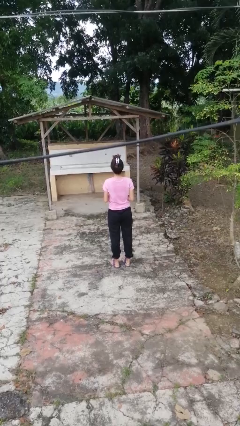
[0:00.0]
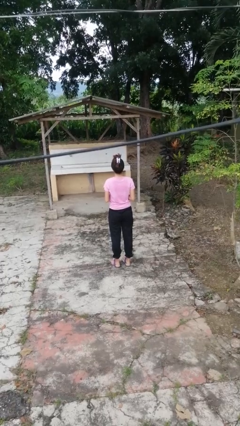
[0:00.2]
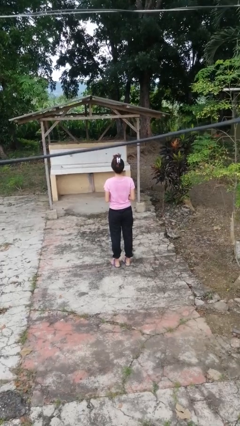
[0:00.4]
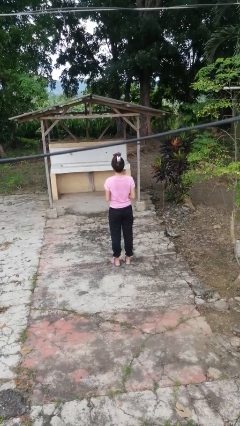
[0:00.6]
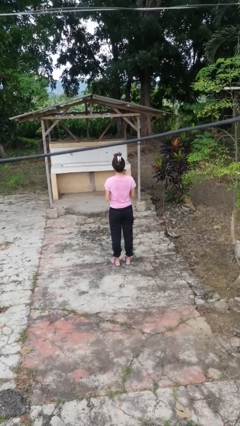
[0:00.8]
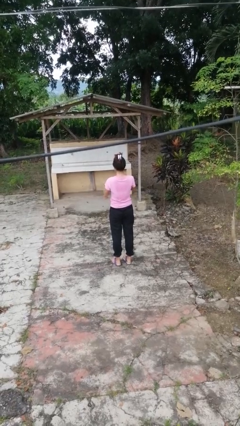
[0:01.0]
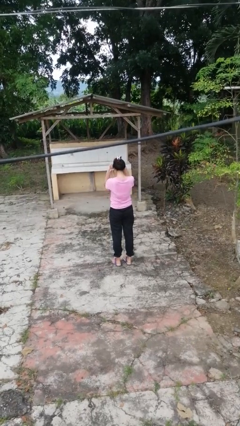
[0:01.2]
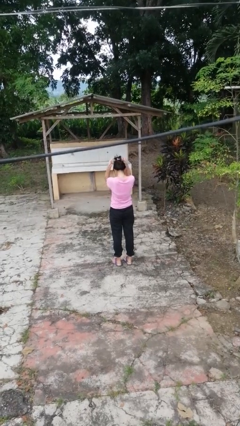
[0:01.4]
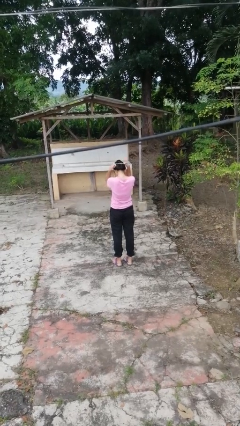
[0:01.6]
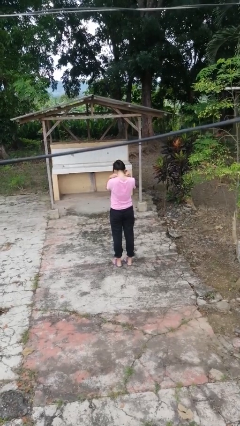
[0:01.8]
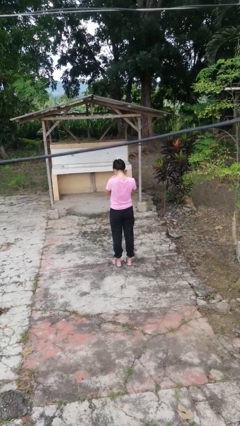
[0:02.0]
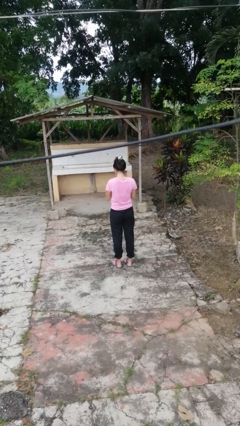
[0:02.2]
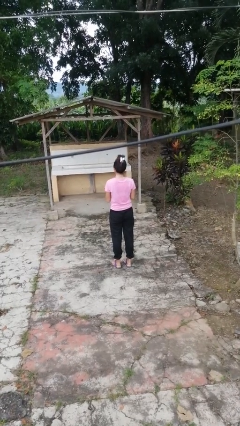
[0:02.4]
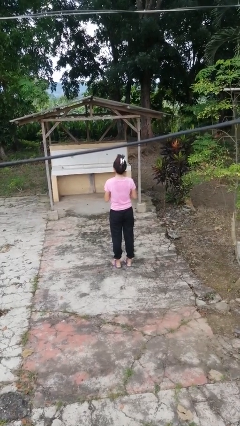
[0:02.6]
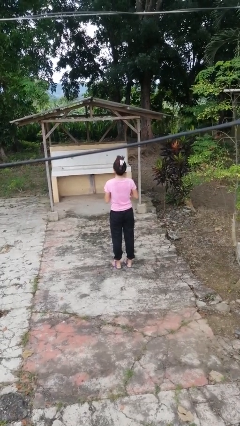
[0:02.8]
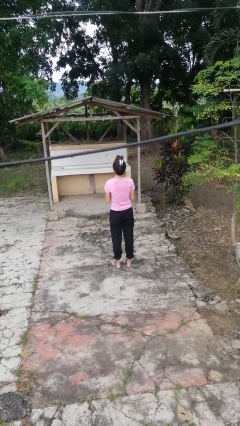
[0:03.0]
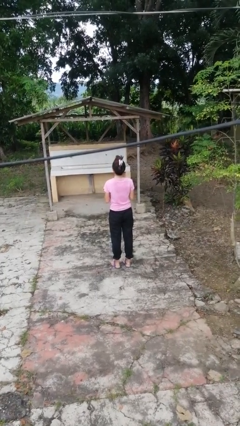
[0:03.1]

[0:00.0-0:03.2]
person puts on necklace

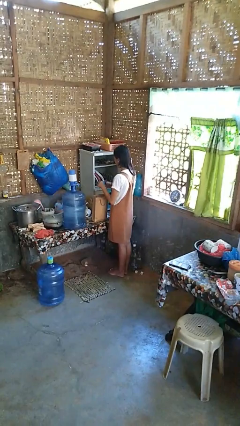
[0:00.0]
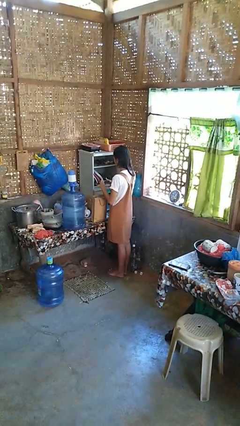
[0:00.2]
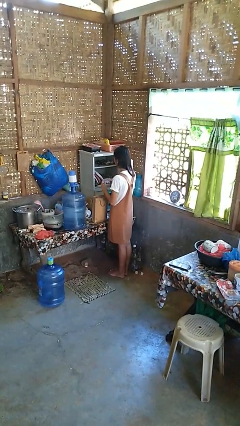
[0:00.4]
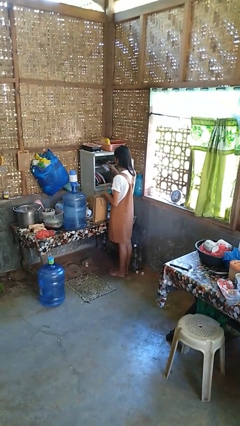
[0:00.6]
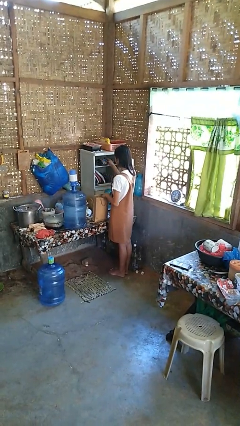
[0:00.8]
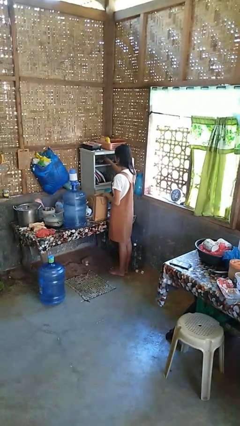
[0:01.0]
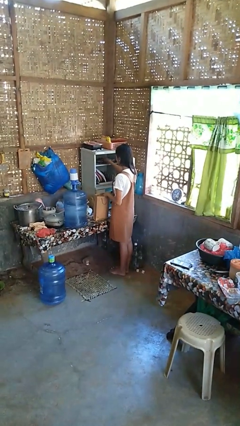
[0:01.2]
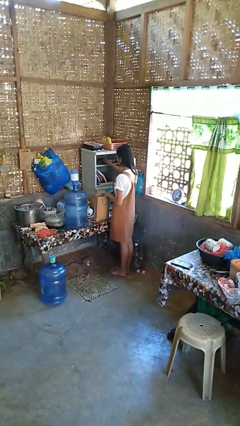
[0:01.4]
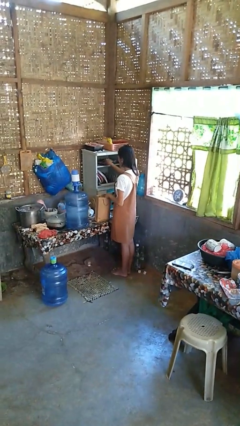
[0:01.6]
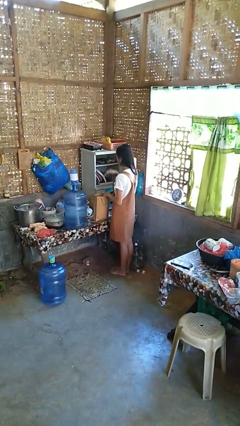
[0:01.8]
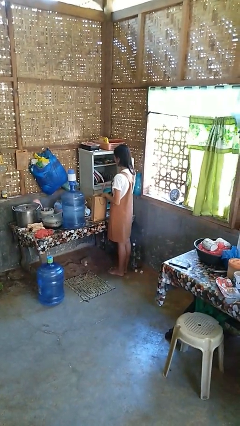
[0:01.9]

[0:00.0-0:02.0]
person loads groceries into cabinet

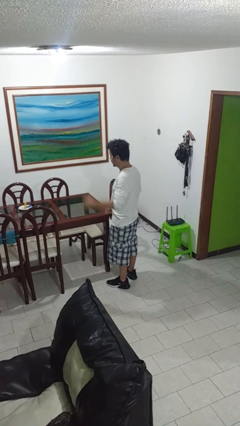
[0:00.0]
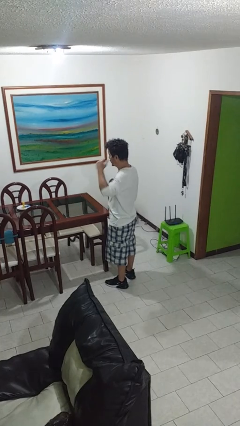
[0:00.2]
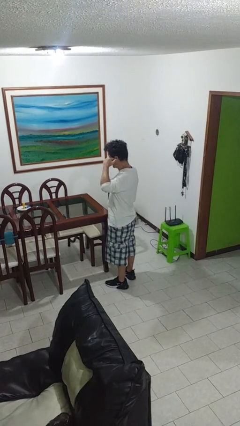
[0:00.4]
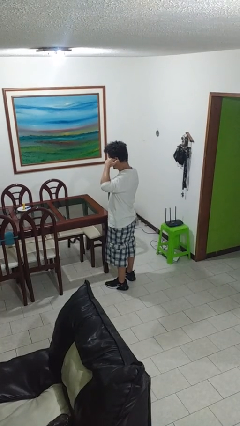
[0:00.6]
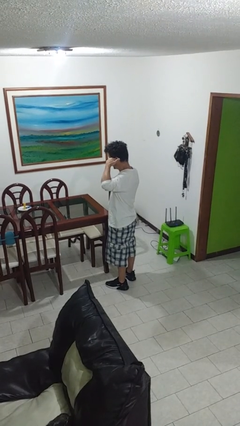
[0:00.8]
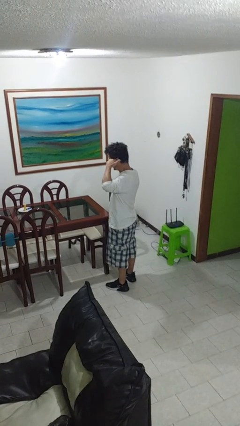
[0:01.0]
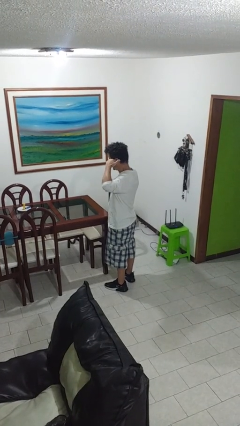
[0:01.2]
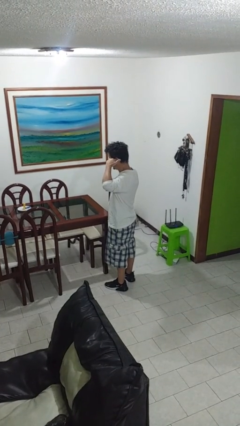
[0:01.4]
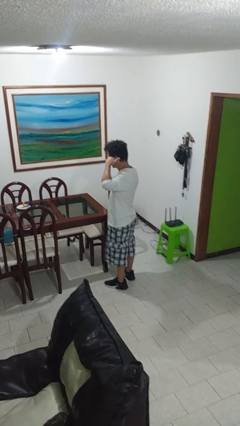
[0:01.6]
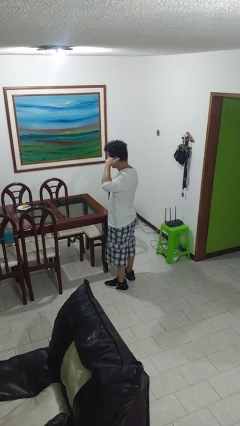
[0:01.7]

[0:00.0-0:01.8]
person puts fingers in ear

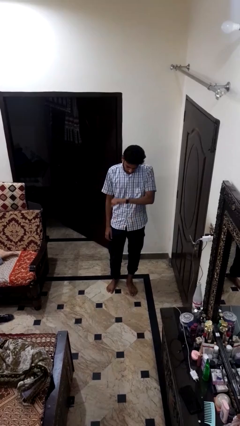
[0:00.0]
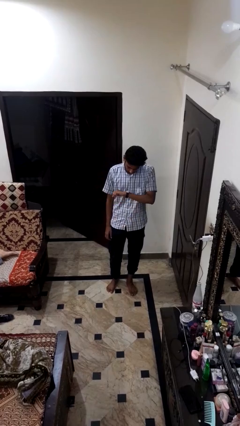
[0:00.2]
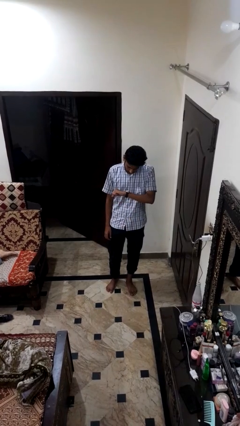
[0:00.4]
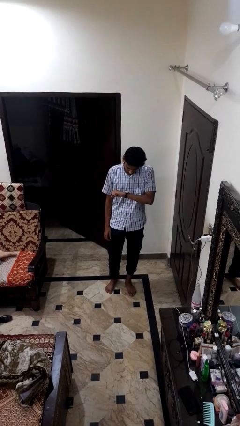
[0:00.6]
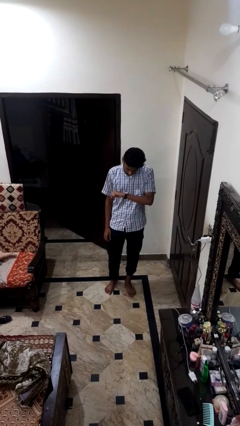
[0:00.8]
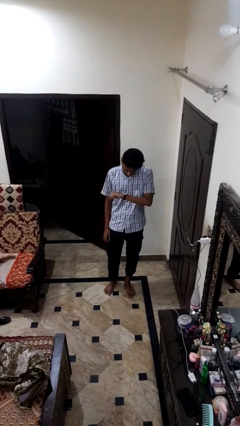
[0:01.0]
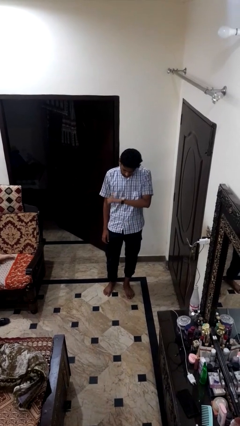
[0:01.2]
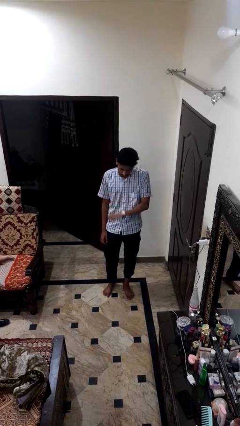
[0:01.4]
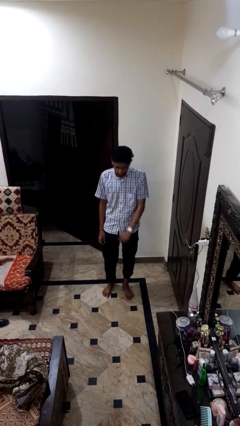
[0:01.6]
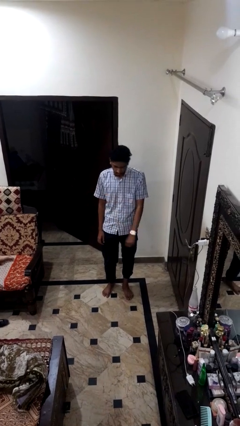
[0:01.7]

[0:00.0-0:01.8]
person looks at wristwatch

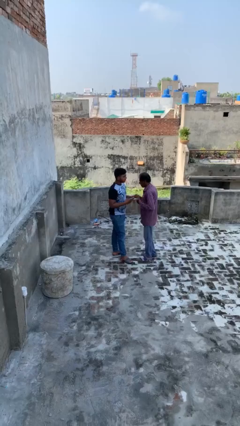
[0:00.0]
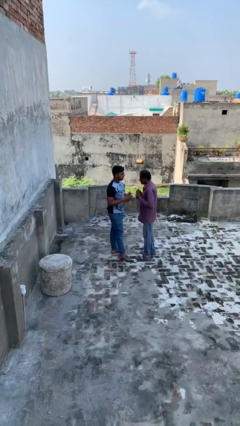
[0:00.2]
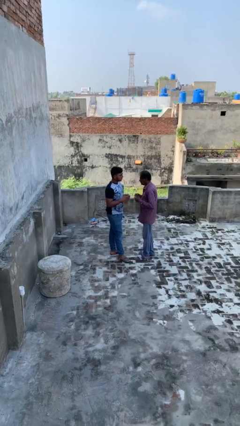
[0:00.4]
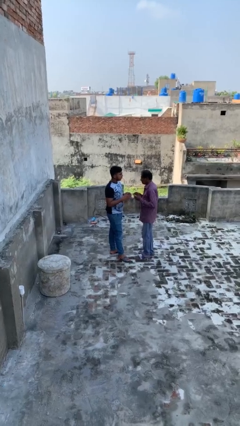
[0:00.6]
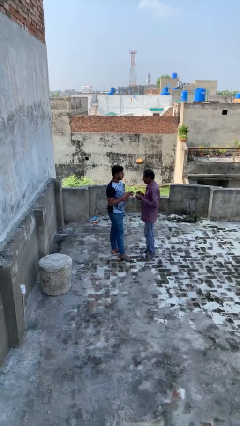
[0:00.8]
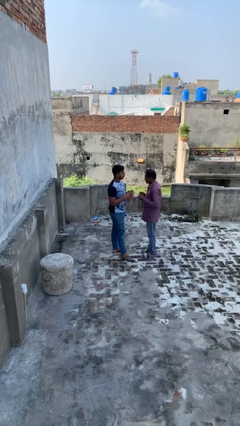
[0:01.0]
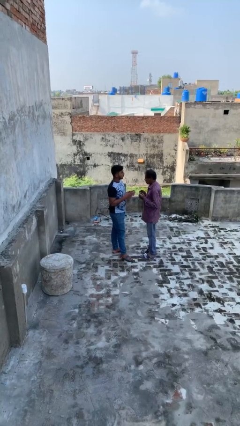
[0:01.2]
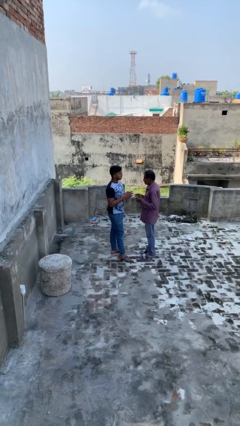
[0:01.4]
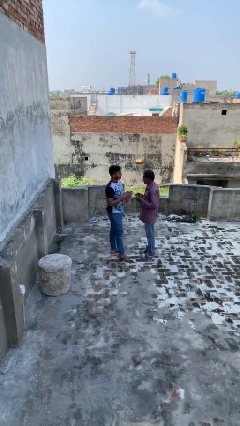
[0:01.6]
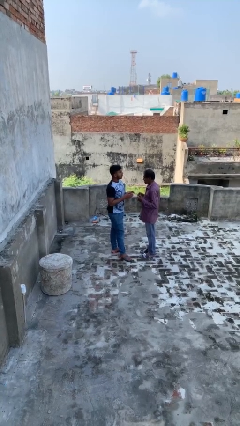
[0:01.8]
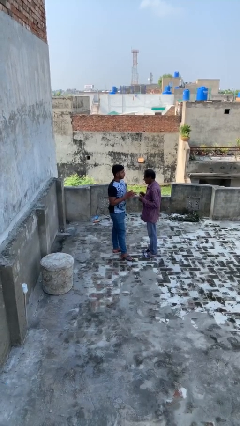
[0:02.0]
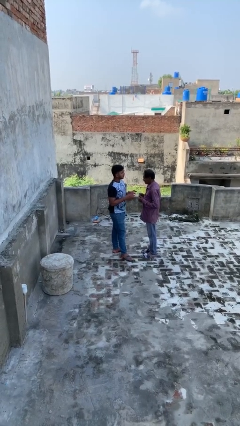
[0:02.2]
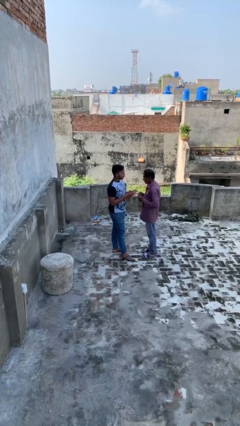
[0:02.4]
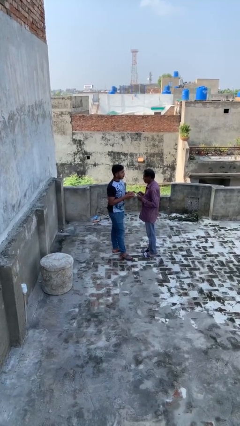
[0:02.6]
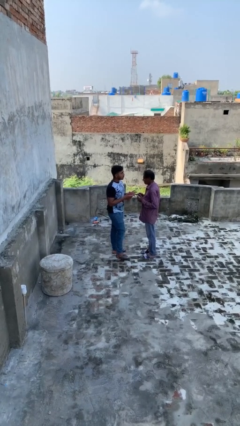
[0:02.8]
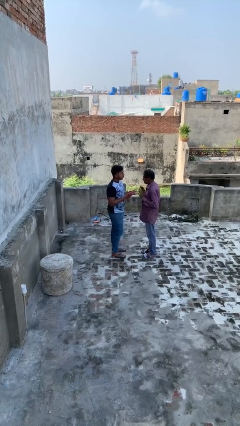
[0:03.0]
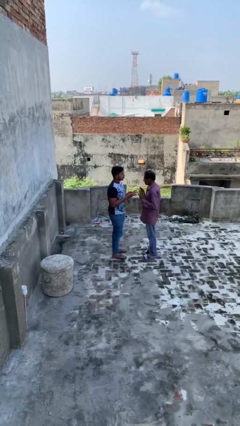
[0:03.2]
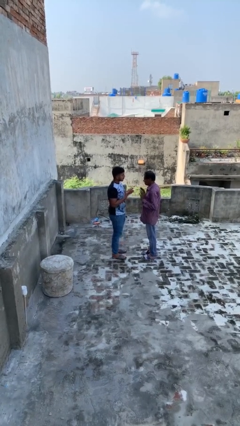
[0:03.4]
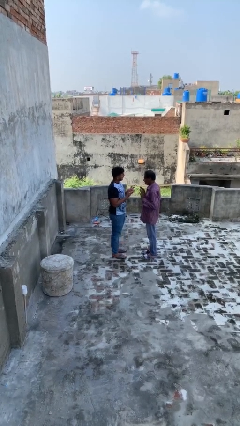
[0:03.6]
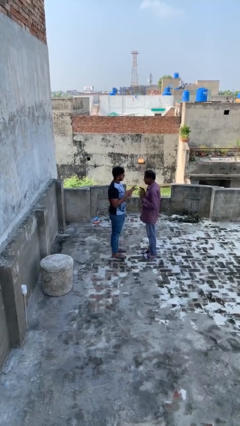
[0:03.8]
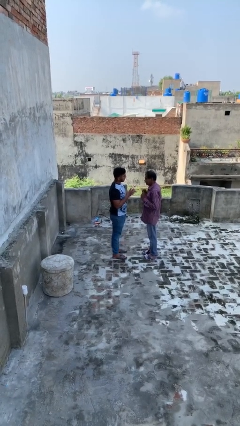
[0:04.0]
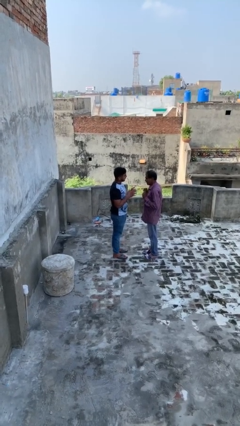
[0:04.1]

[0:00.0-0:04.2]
person talks to person

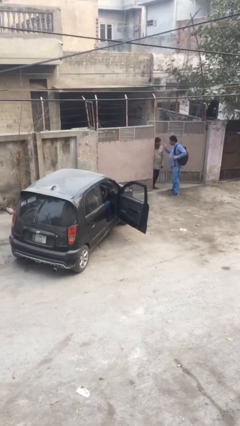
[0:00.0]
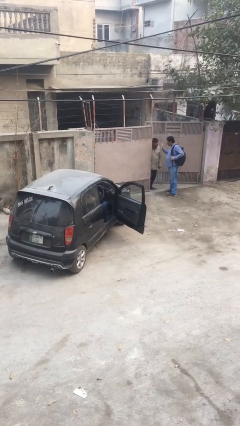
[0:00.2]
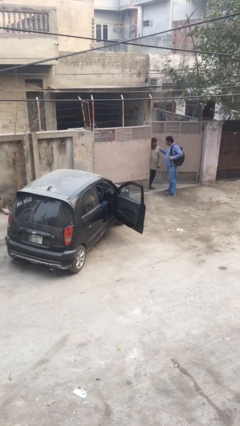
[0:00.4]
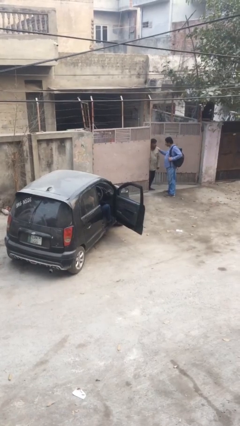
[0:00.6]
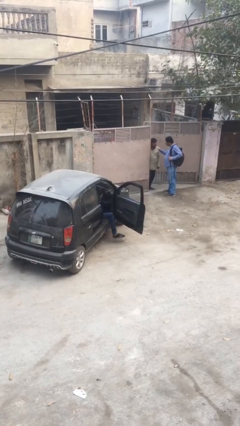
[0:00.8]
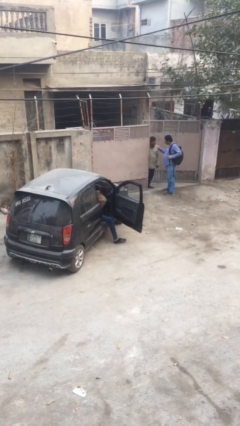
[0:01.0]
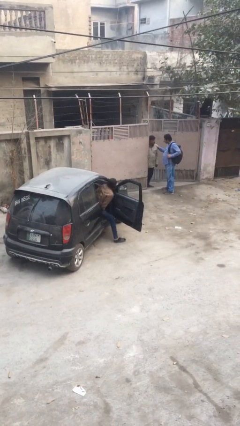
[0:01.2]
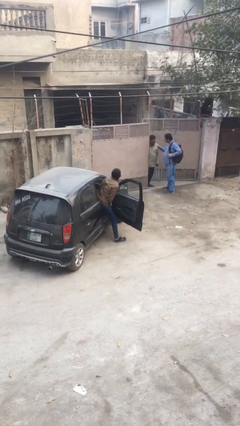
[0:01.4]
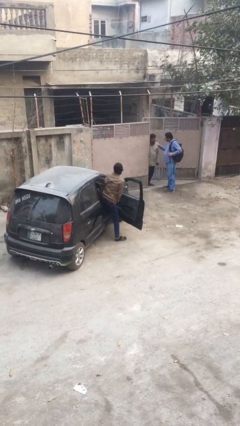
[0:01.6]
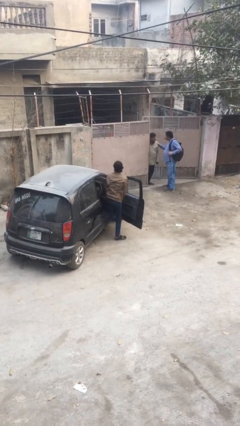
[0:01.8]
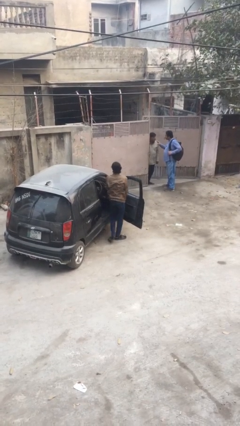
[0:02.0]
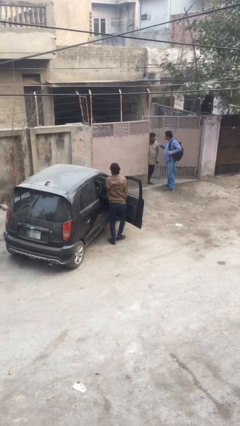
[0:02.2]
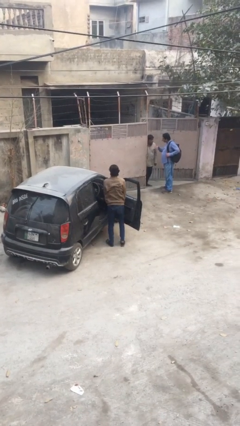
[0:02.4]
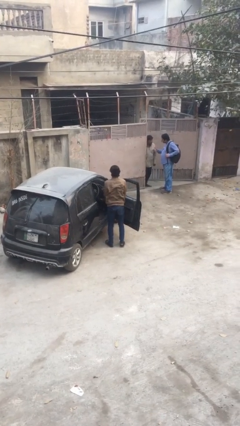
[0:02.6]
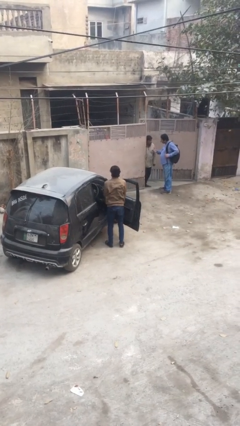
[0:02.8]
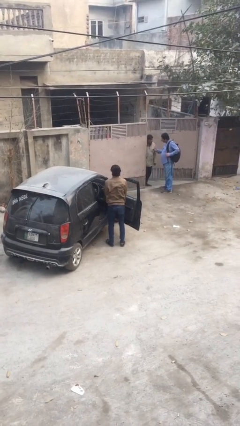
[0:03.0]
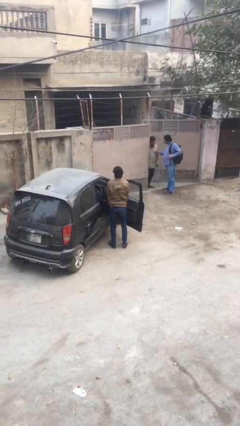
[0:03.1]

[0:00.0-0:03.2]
person exits car

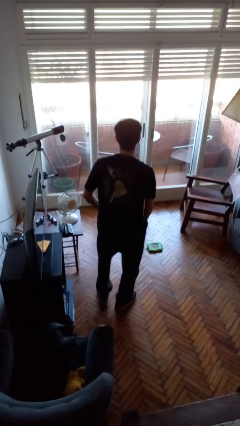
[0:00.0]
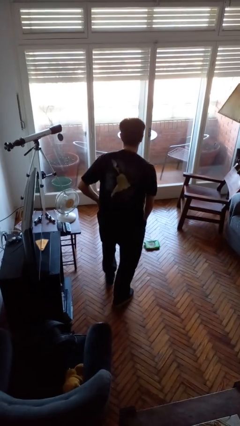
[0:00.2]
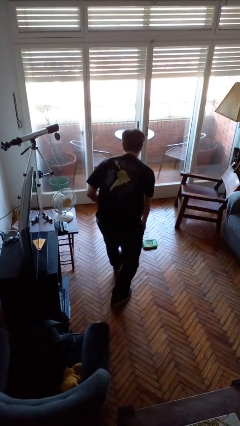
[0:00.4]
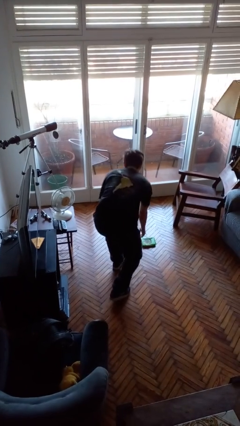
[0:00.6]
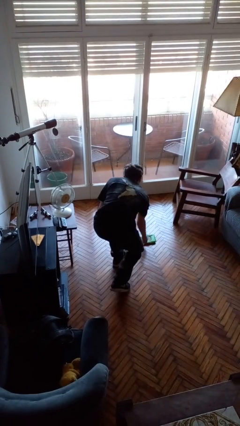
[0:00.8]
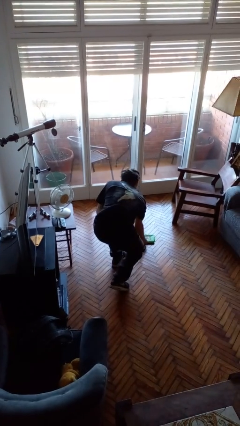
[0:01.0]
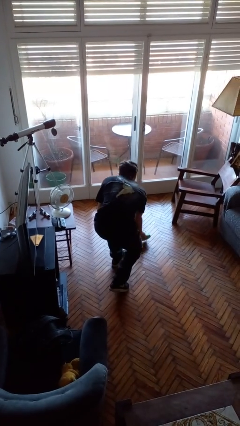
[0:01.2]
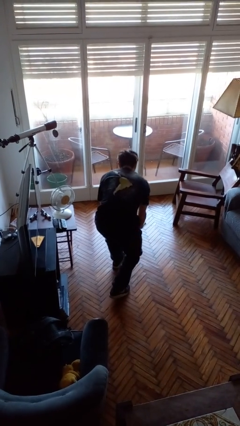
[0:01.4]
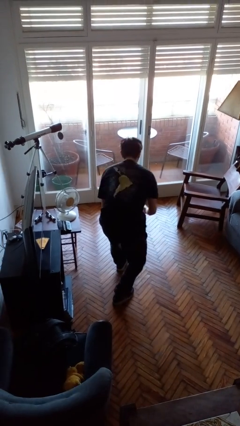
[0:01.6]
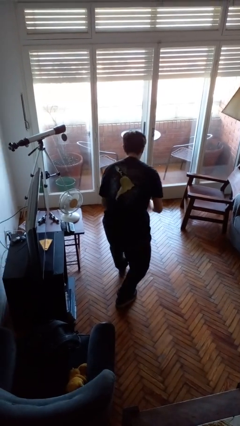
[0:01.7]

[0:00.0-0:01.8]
person picks up object from floor
